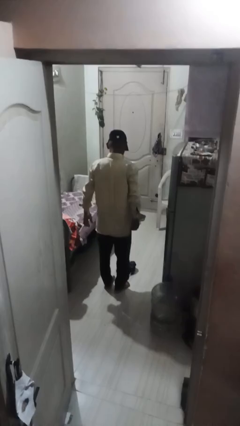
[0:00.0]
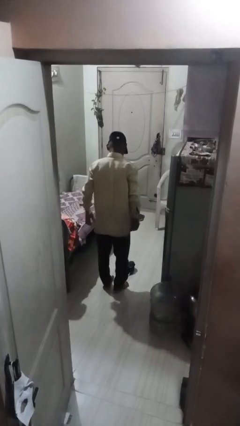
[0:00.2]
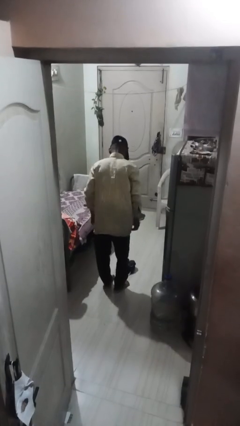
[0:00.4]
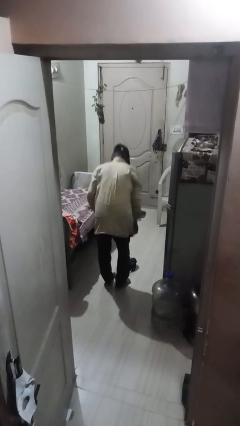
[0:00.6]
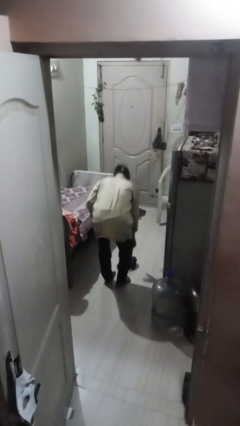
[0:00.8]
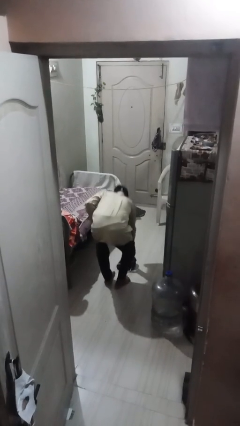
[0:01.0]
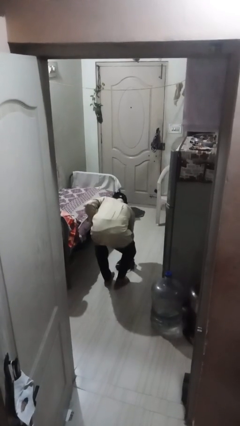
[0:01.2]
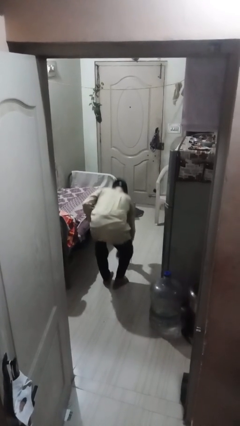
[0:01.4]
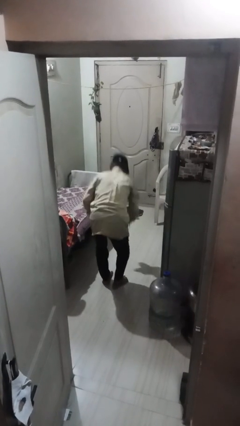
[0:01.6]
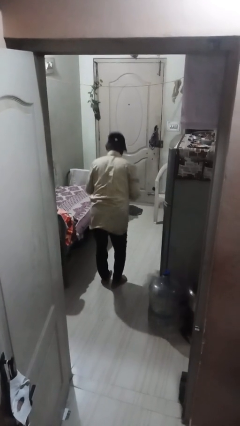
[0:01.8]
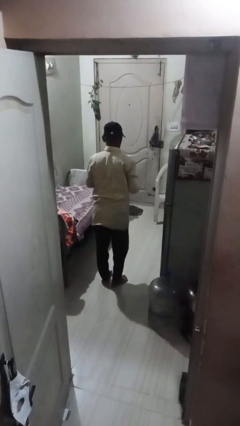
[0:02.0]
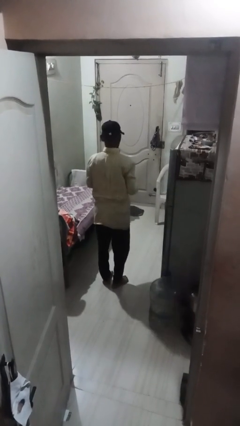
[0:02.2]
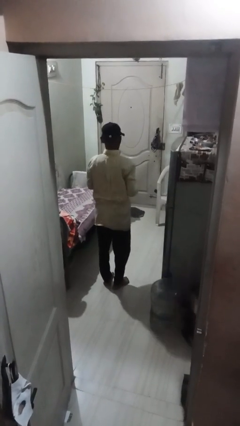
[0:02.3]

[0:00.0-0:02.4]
person picks up object from floor

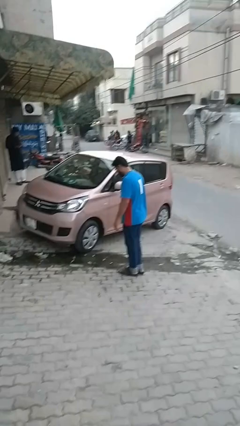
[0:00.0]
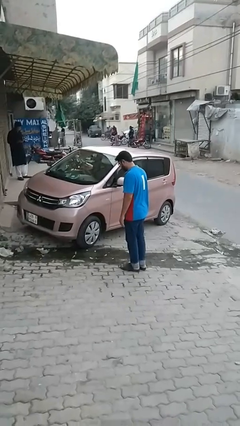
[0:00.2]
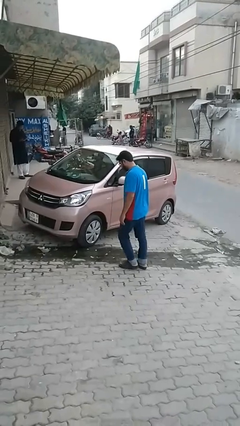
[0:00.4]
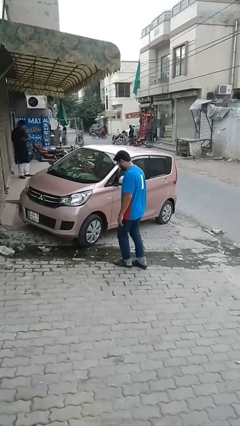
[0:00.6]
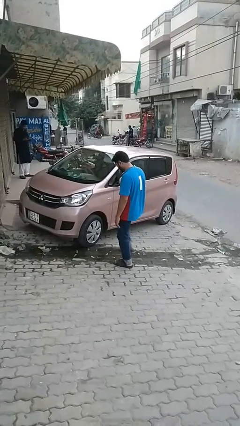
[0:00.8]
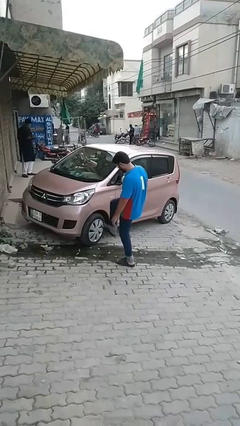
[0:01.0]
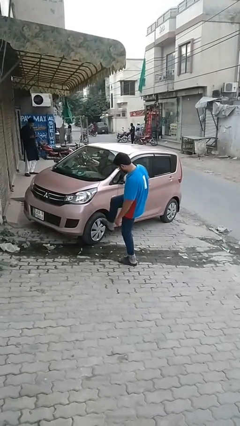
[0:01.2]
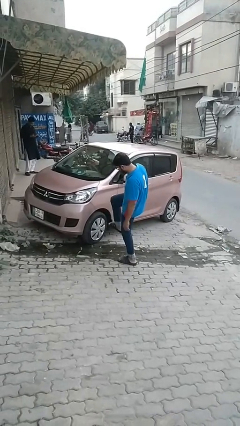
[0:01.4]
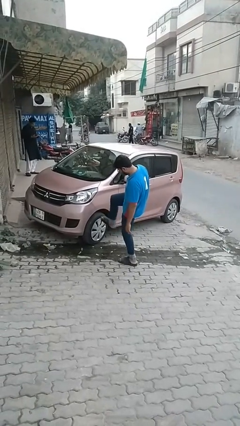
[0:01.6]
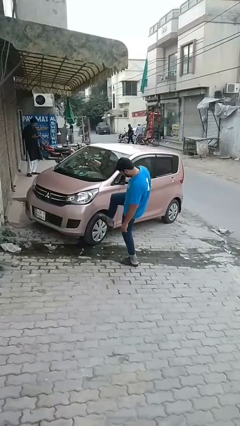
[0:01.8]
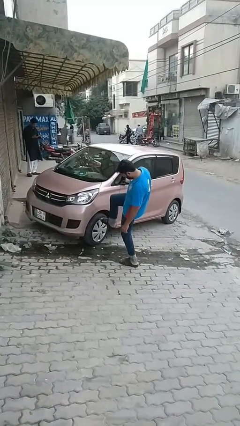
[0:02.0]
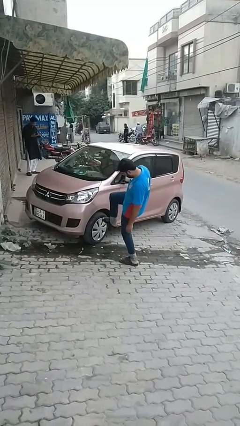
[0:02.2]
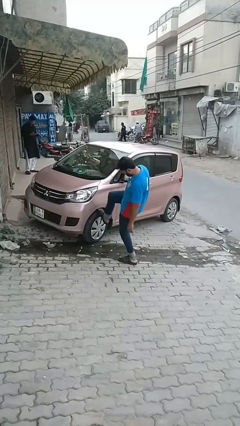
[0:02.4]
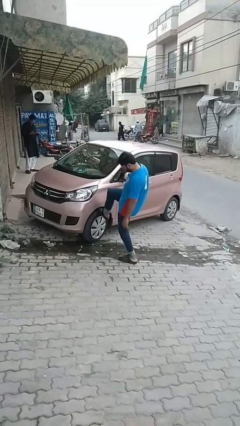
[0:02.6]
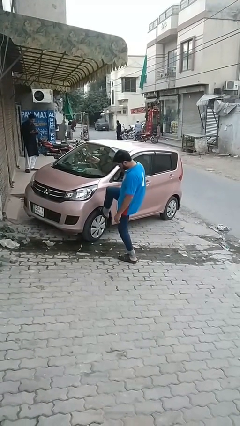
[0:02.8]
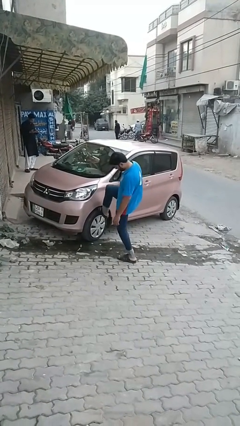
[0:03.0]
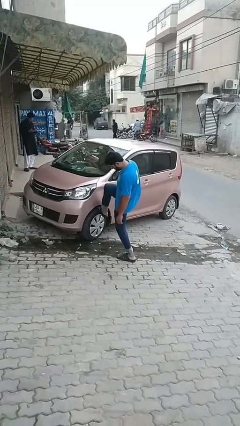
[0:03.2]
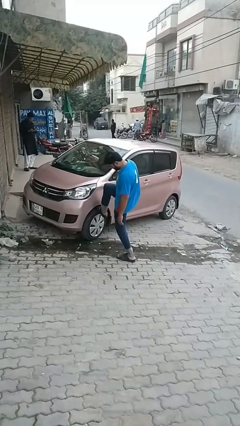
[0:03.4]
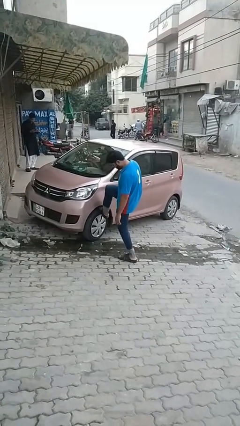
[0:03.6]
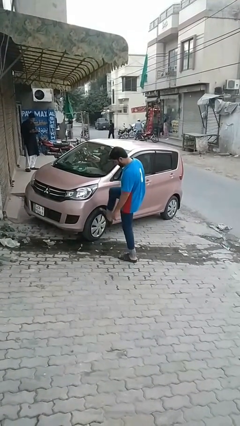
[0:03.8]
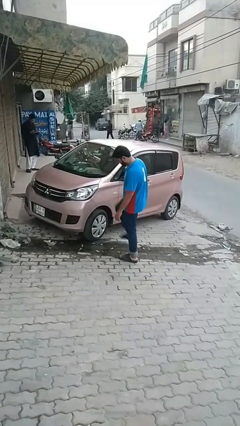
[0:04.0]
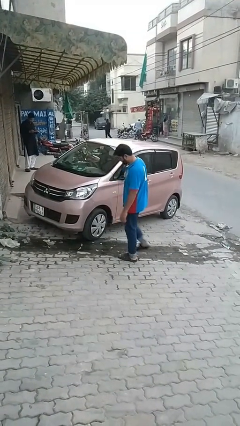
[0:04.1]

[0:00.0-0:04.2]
person kicks car tires

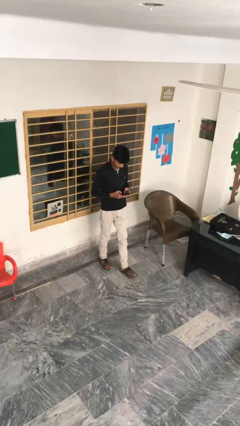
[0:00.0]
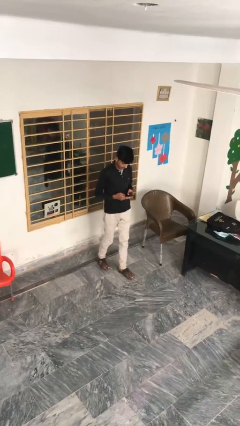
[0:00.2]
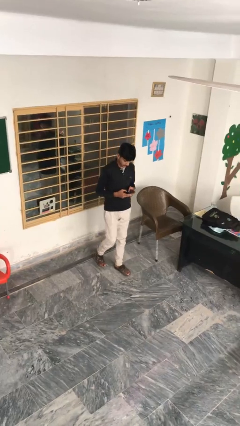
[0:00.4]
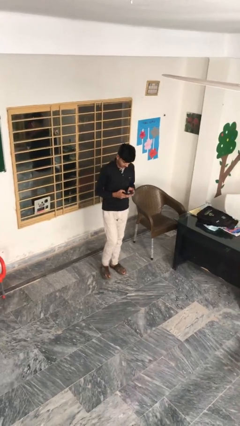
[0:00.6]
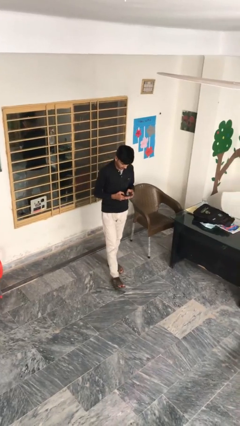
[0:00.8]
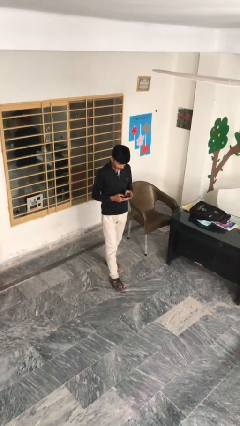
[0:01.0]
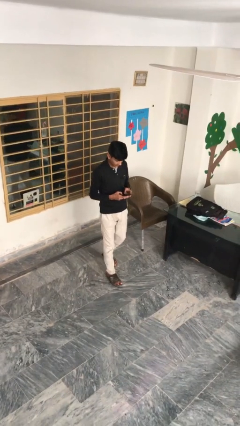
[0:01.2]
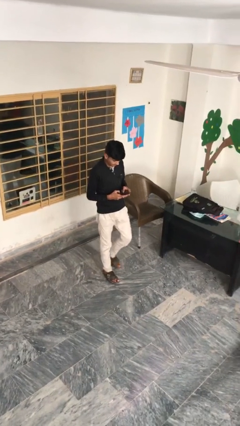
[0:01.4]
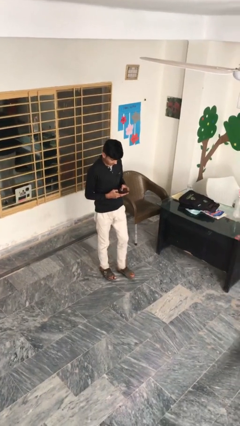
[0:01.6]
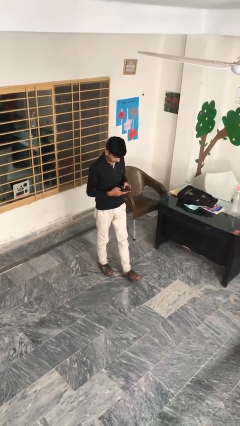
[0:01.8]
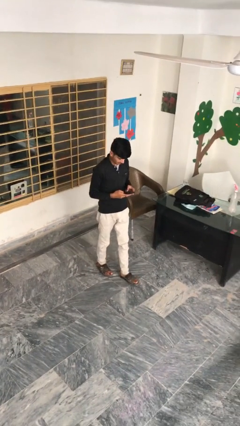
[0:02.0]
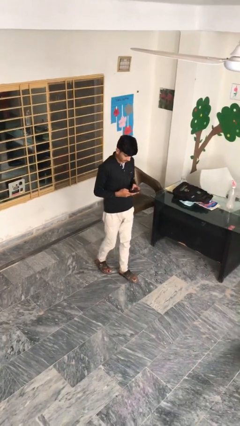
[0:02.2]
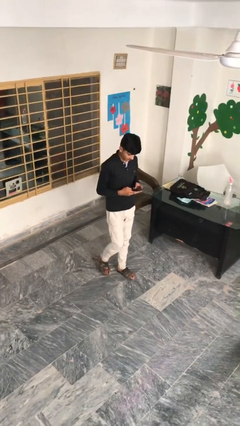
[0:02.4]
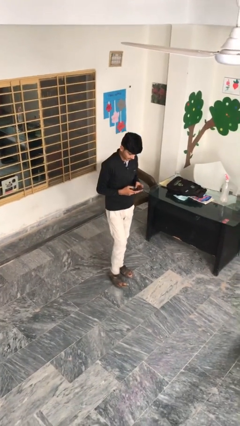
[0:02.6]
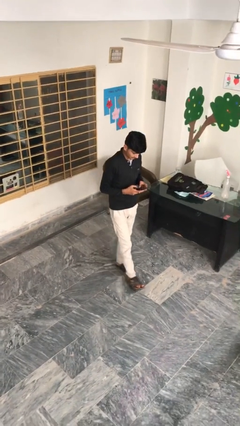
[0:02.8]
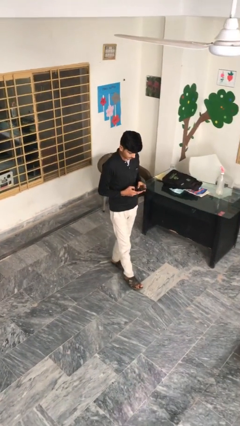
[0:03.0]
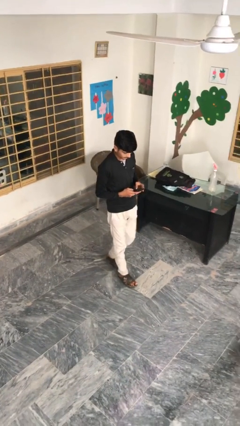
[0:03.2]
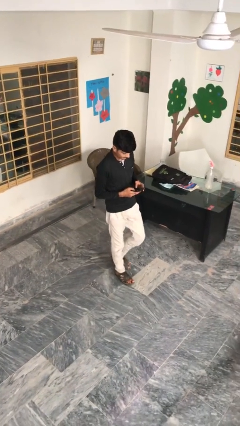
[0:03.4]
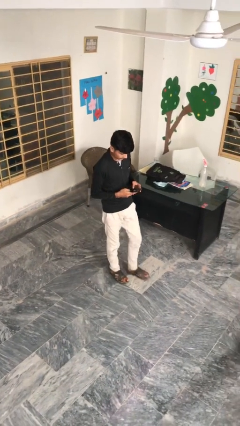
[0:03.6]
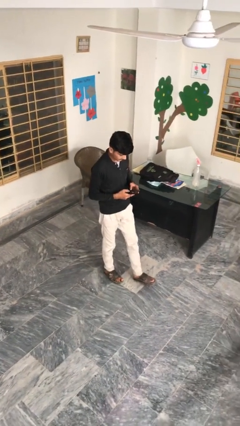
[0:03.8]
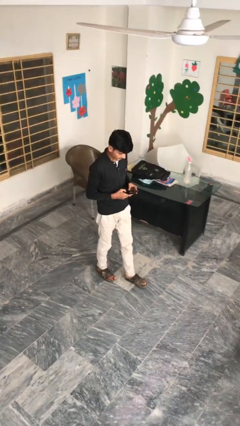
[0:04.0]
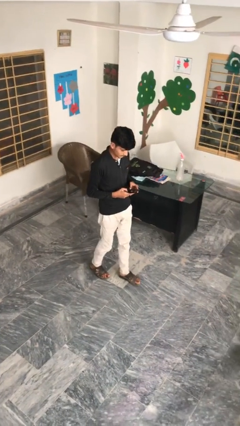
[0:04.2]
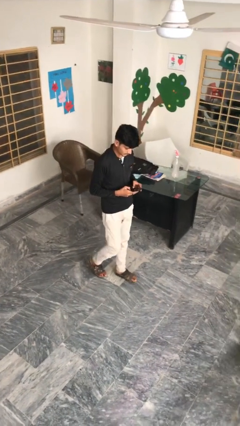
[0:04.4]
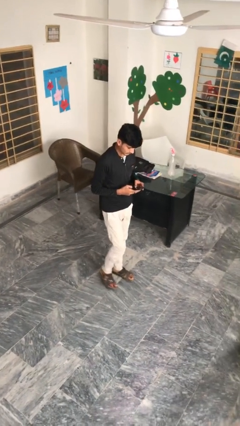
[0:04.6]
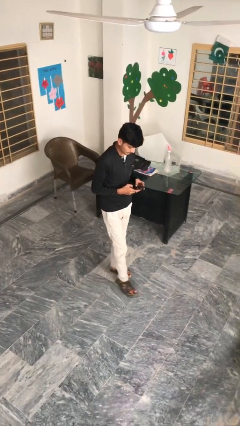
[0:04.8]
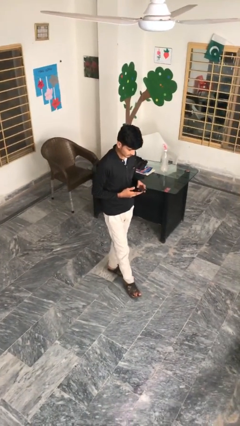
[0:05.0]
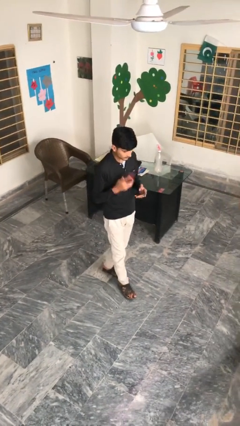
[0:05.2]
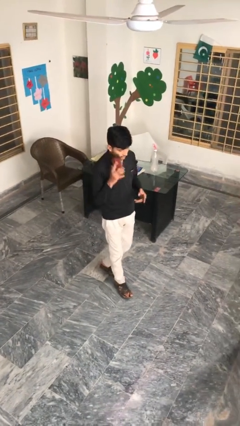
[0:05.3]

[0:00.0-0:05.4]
person texts on phone

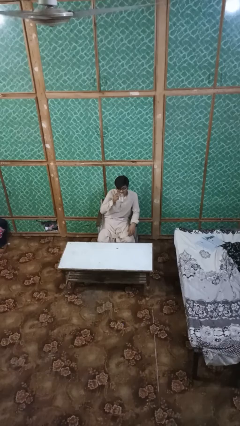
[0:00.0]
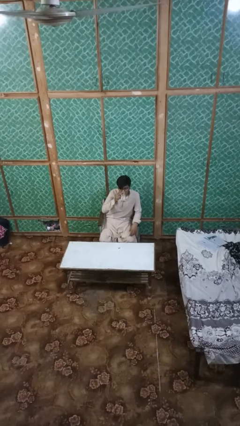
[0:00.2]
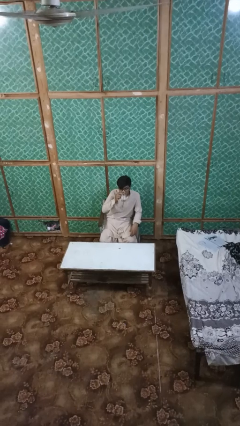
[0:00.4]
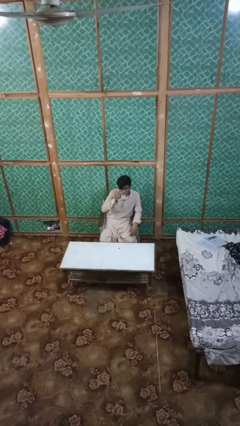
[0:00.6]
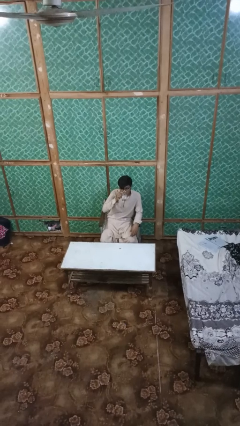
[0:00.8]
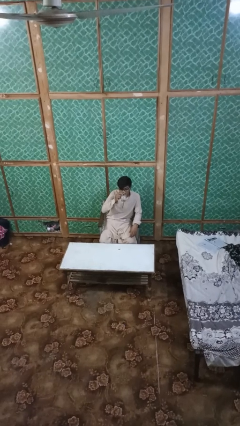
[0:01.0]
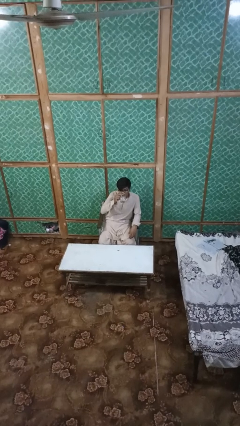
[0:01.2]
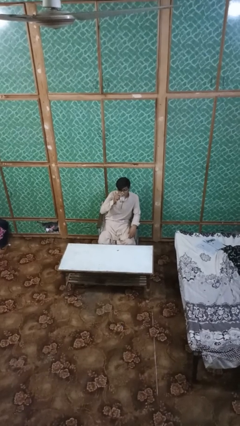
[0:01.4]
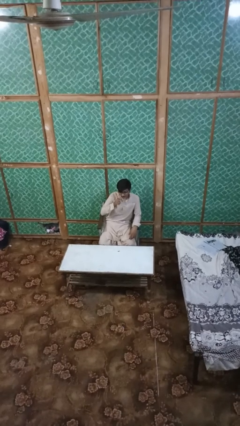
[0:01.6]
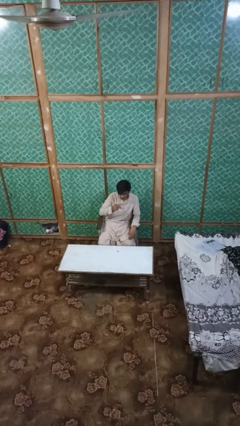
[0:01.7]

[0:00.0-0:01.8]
person drinks from shotglass

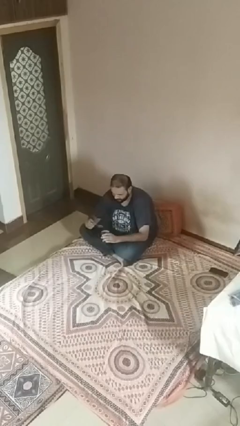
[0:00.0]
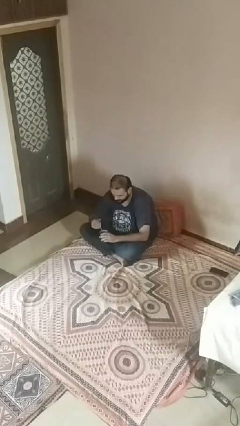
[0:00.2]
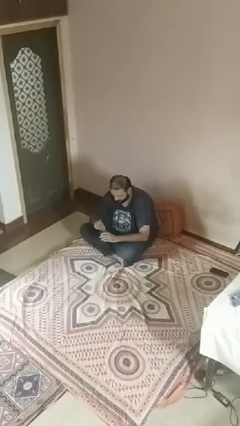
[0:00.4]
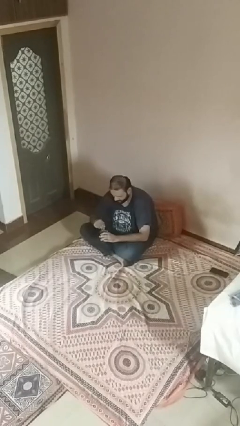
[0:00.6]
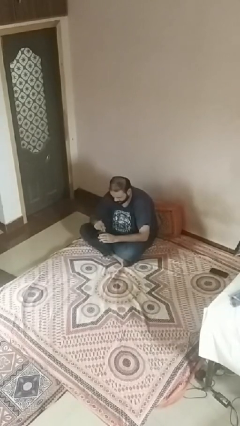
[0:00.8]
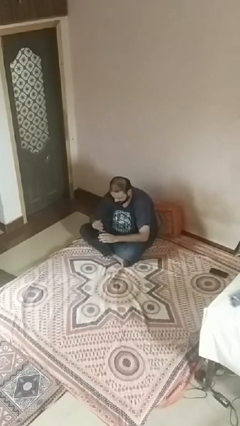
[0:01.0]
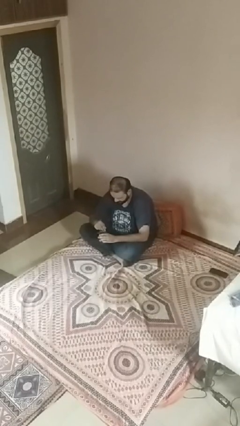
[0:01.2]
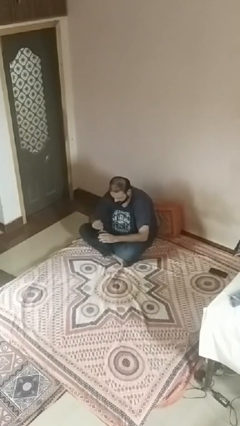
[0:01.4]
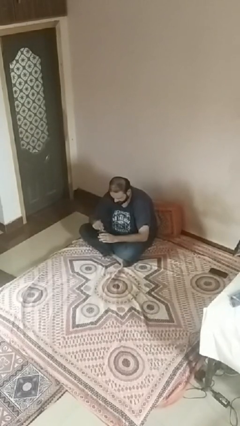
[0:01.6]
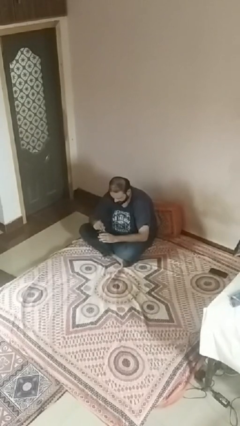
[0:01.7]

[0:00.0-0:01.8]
person stirs mug

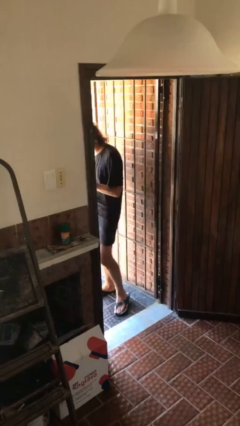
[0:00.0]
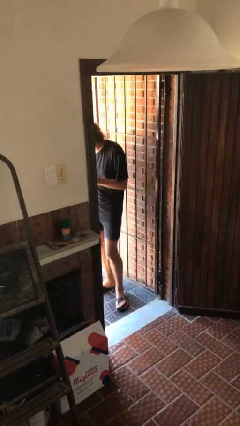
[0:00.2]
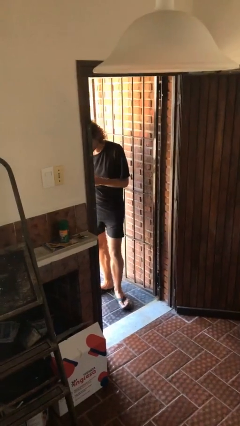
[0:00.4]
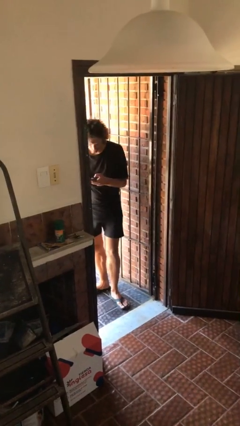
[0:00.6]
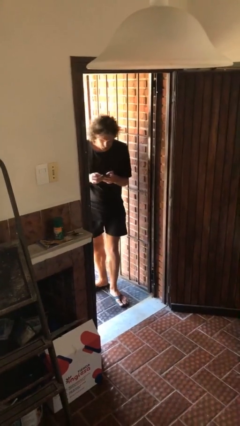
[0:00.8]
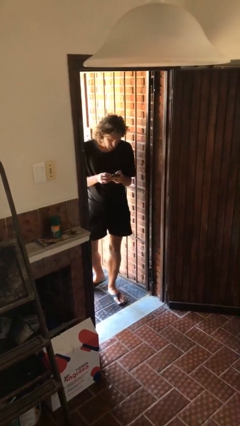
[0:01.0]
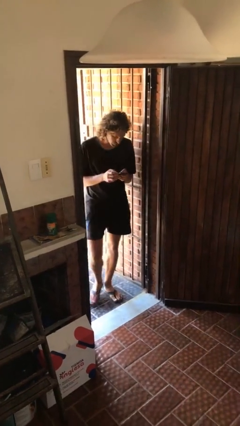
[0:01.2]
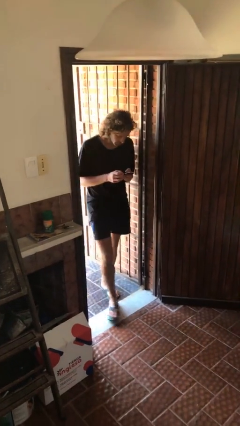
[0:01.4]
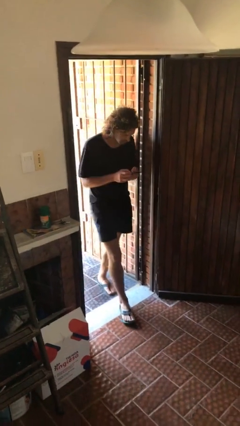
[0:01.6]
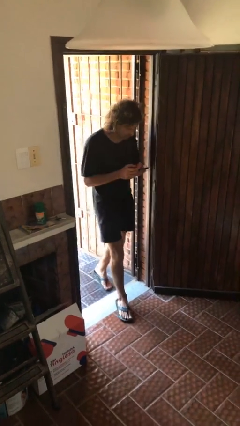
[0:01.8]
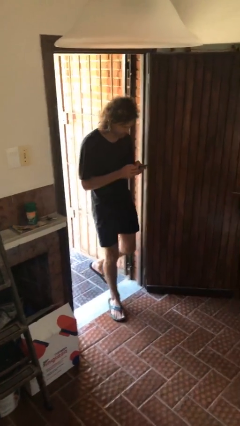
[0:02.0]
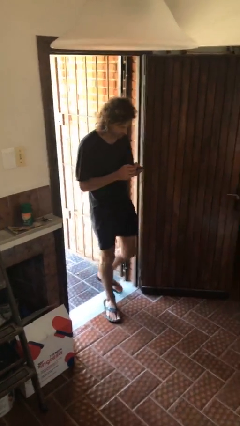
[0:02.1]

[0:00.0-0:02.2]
person enters scene through structure
